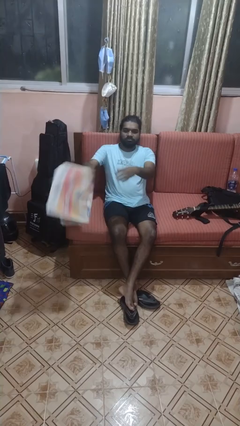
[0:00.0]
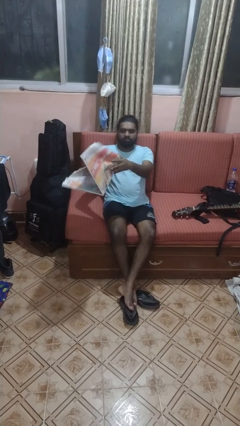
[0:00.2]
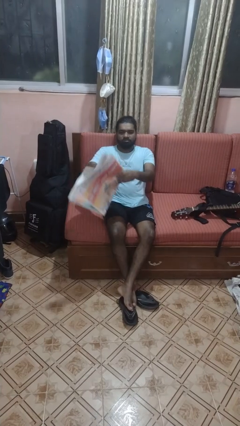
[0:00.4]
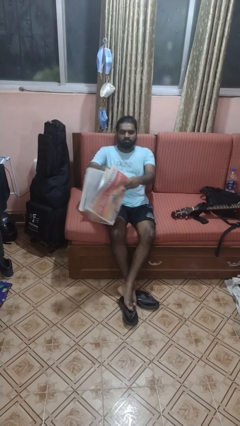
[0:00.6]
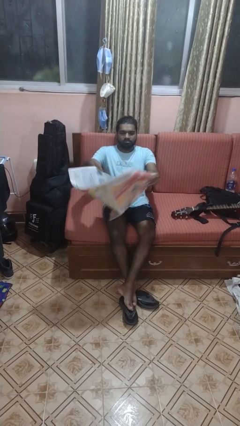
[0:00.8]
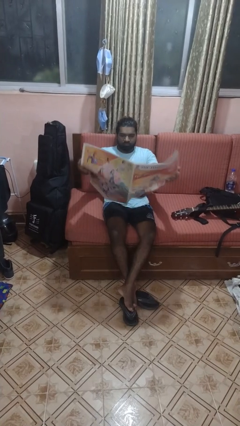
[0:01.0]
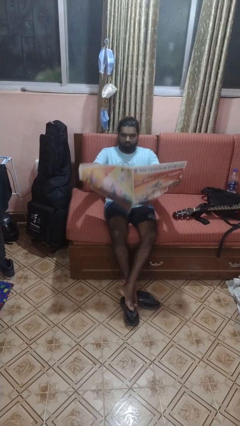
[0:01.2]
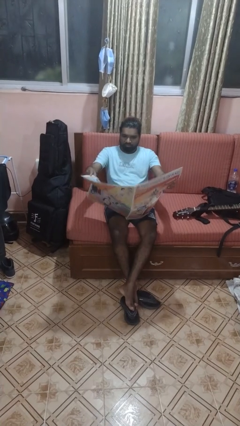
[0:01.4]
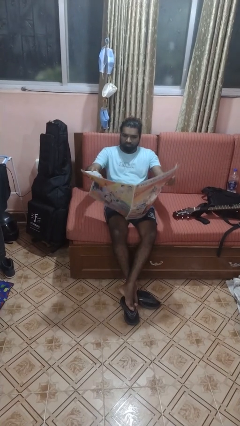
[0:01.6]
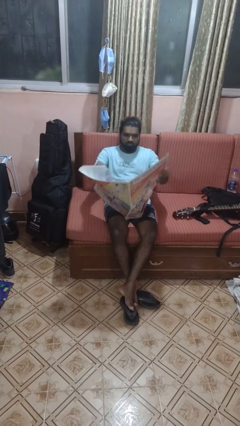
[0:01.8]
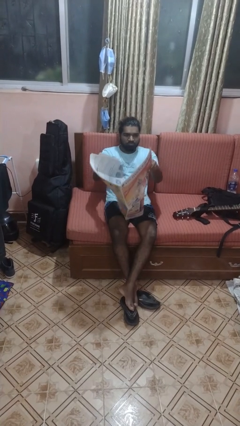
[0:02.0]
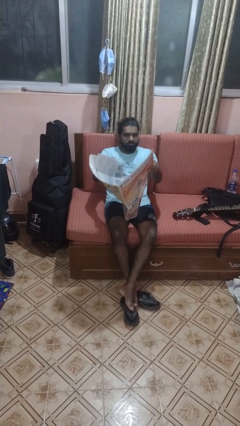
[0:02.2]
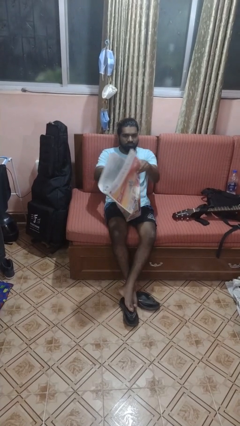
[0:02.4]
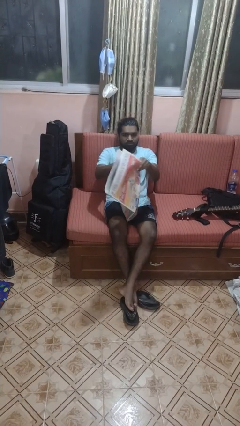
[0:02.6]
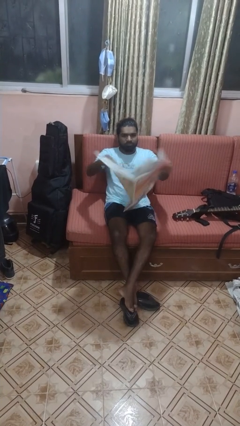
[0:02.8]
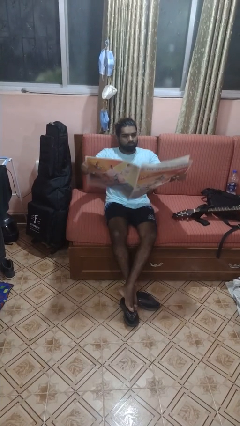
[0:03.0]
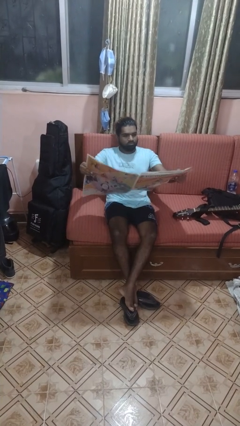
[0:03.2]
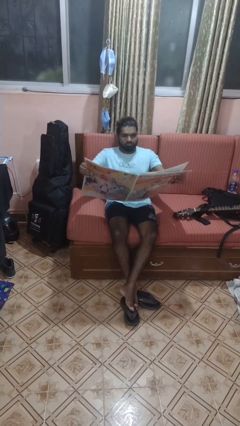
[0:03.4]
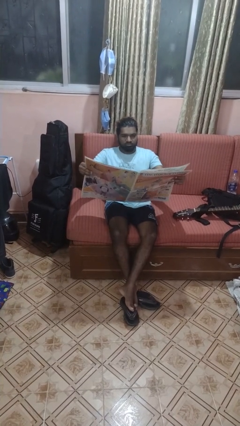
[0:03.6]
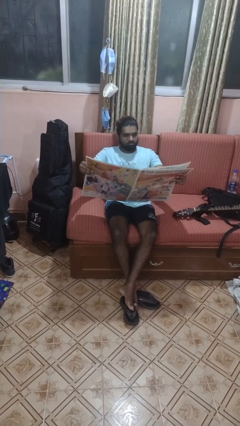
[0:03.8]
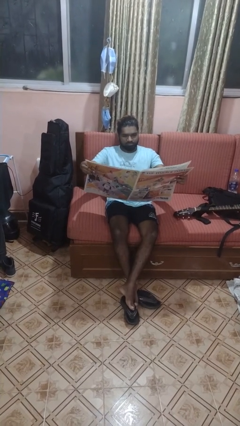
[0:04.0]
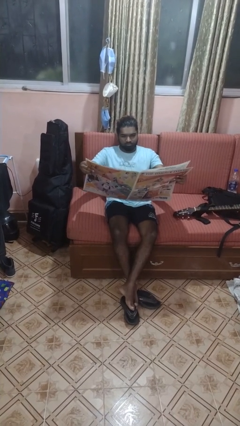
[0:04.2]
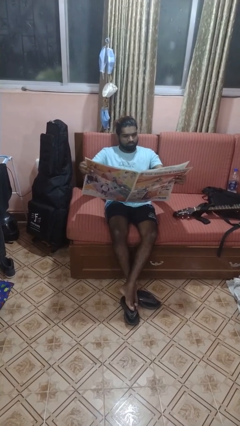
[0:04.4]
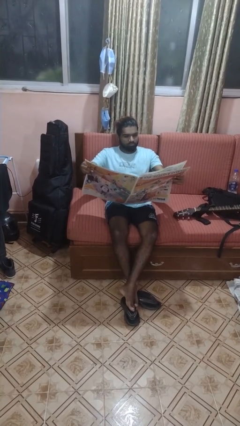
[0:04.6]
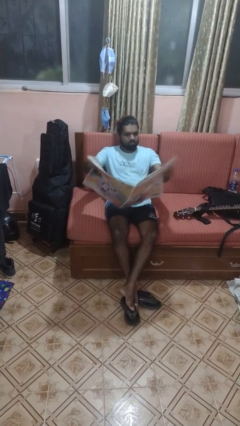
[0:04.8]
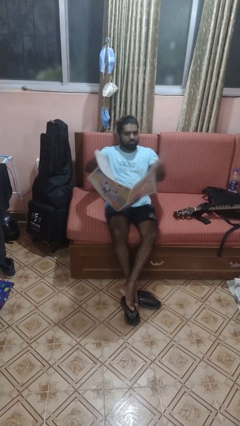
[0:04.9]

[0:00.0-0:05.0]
person reads newspaper

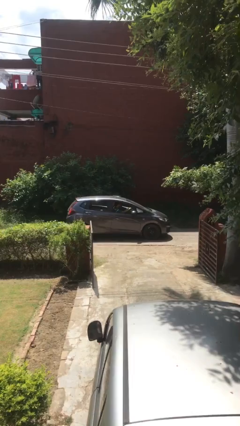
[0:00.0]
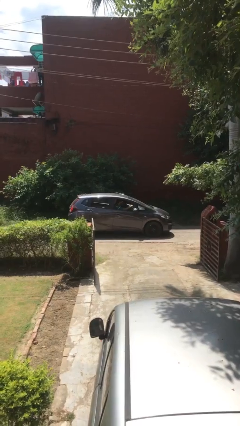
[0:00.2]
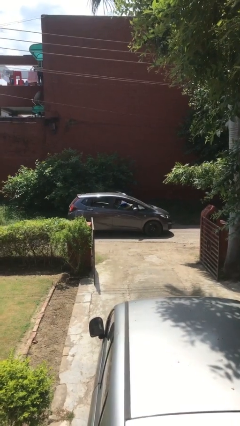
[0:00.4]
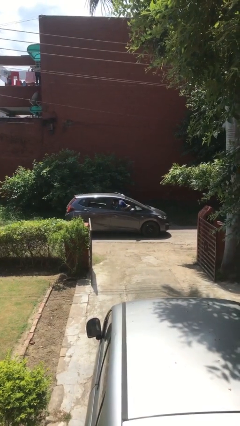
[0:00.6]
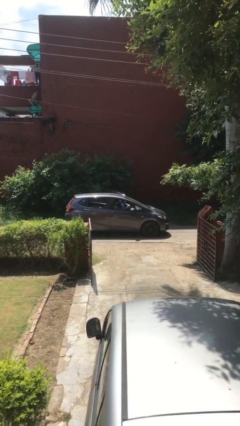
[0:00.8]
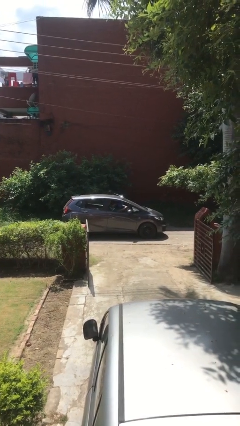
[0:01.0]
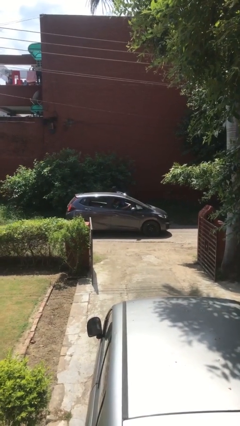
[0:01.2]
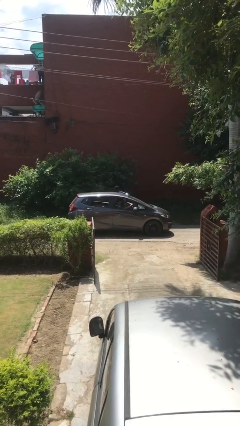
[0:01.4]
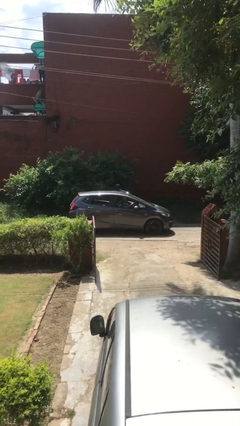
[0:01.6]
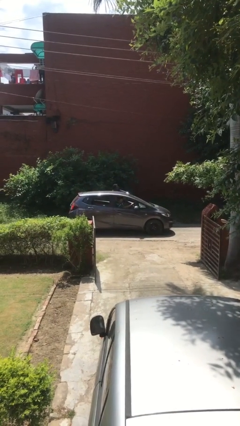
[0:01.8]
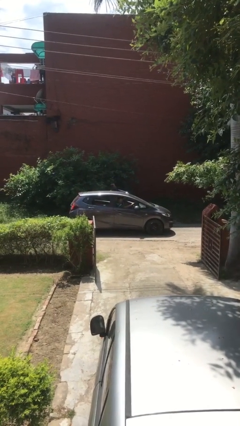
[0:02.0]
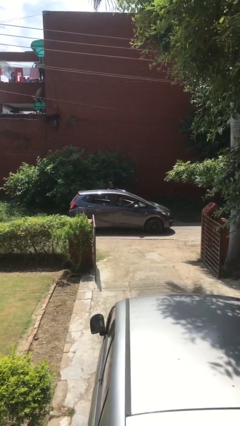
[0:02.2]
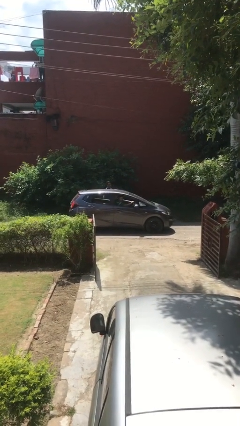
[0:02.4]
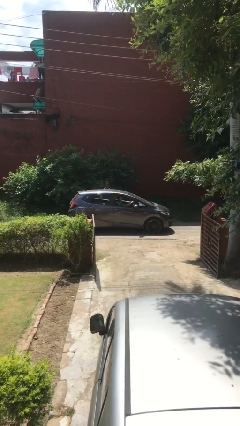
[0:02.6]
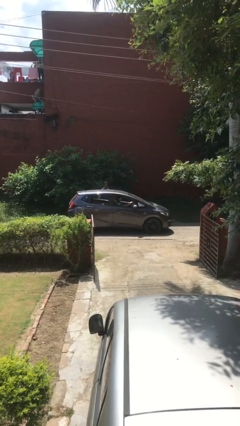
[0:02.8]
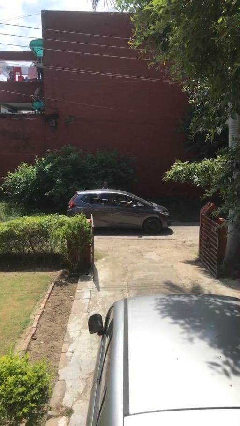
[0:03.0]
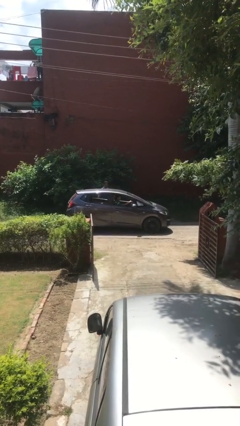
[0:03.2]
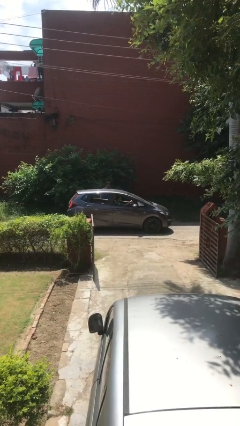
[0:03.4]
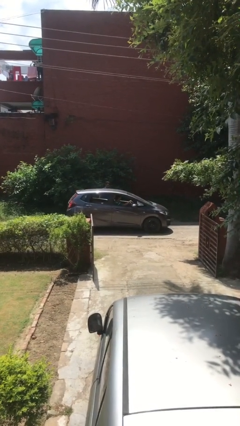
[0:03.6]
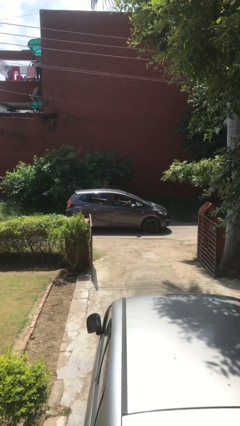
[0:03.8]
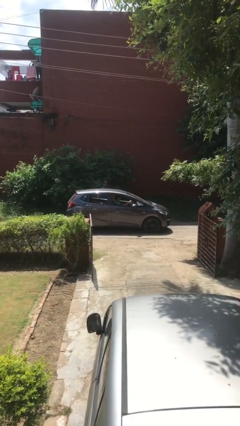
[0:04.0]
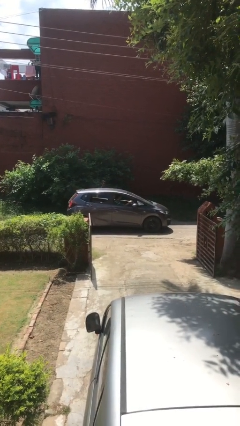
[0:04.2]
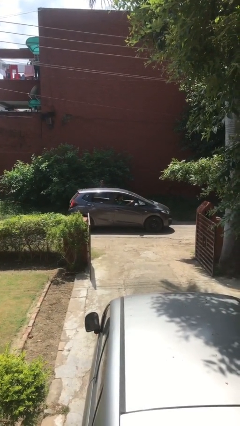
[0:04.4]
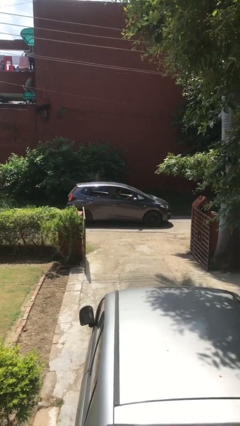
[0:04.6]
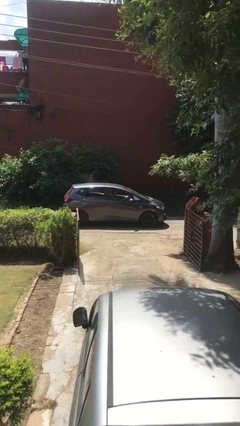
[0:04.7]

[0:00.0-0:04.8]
car drops off person

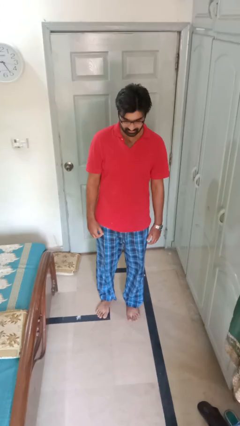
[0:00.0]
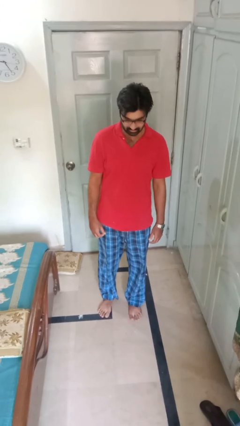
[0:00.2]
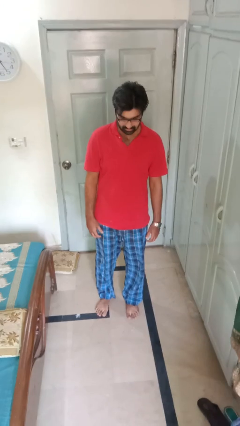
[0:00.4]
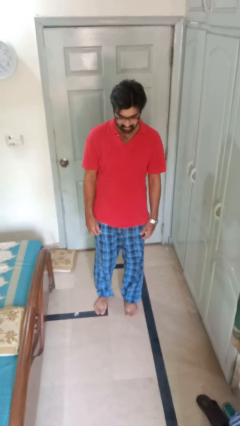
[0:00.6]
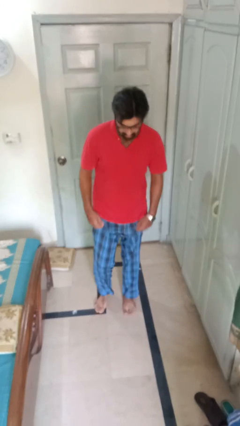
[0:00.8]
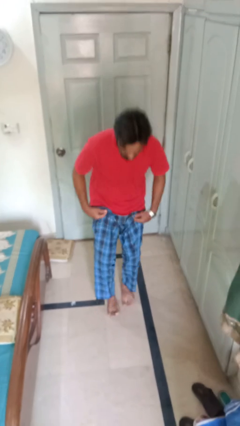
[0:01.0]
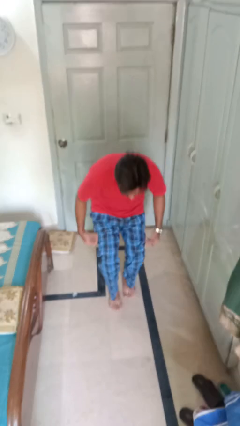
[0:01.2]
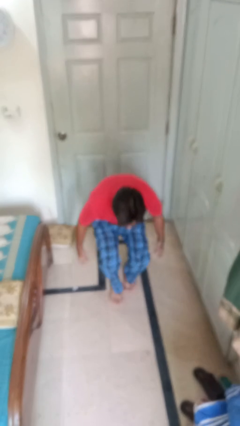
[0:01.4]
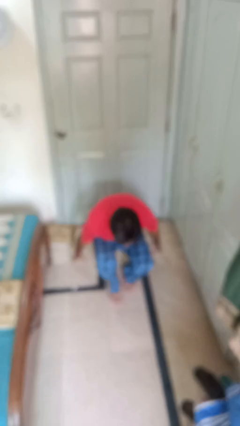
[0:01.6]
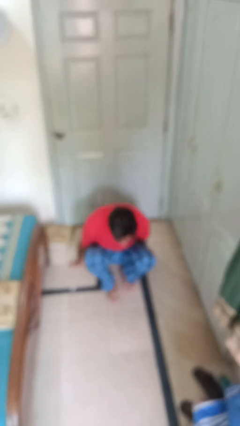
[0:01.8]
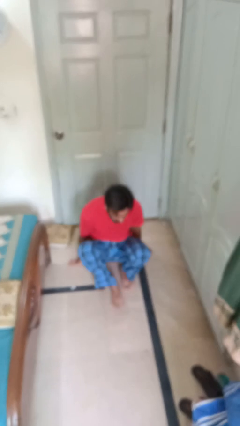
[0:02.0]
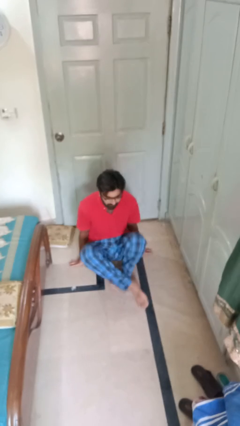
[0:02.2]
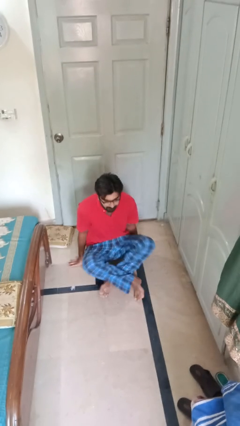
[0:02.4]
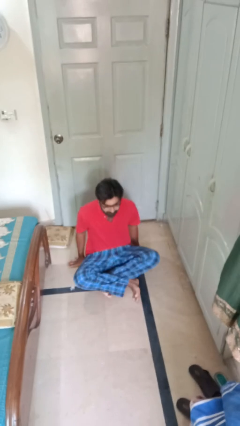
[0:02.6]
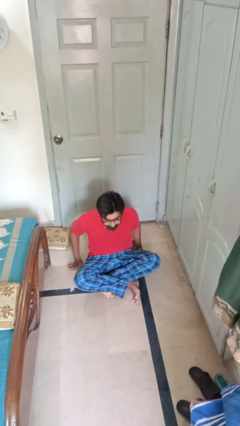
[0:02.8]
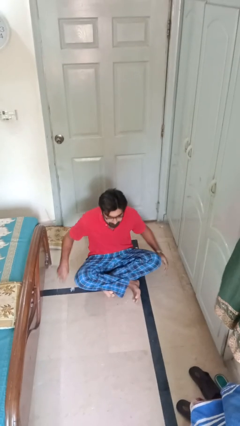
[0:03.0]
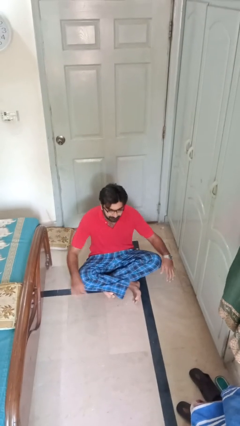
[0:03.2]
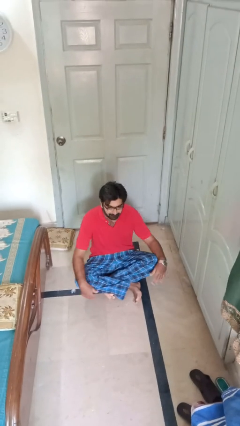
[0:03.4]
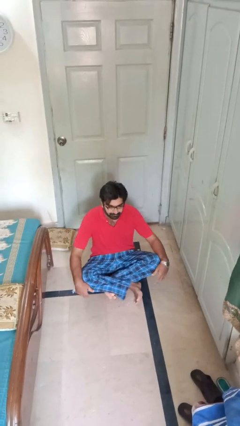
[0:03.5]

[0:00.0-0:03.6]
person sits crisscross

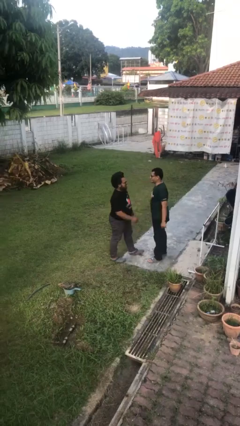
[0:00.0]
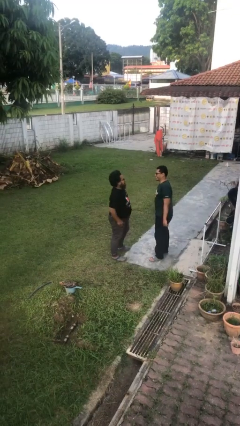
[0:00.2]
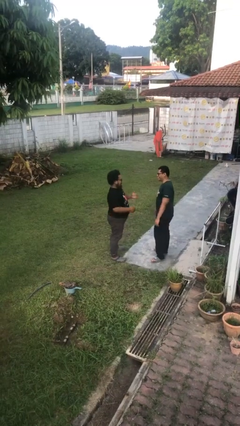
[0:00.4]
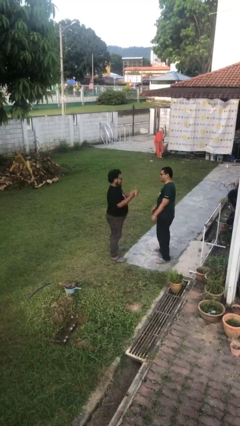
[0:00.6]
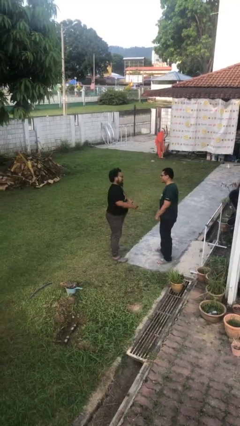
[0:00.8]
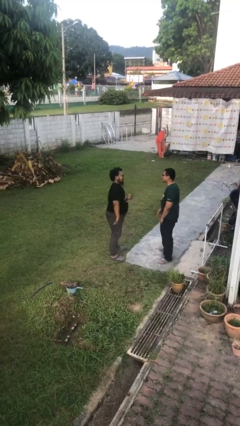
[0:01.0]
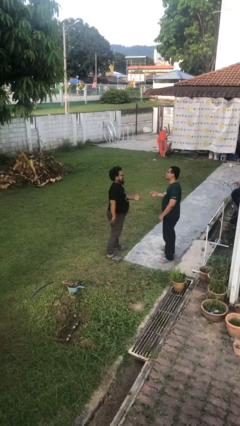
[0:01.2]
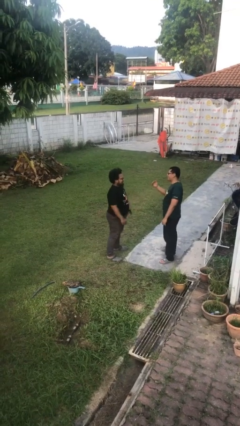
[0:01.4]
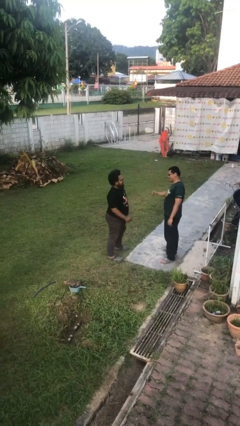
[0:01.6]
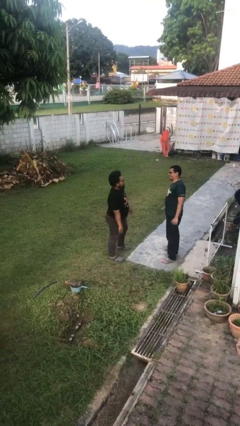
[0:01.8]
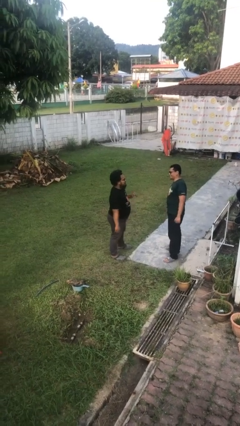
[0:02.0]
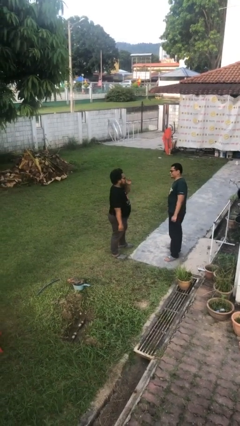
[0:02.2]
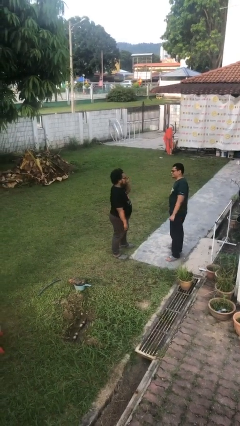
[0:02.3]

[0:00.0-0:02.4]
person talks to person

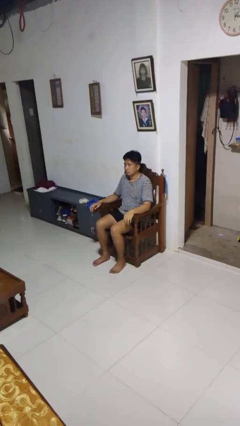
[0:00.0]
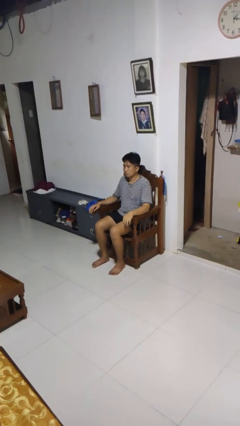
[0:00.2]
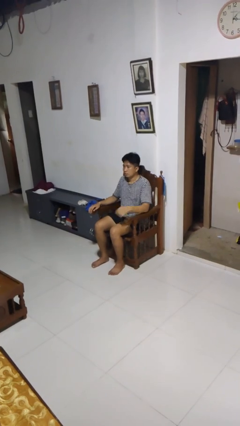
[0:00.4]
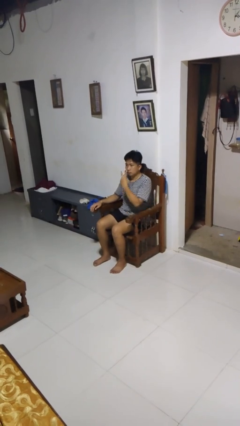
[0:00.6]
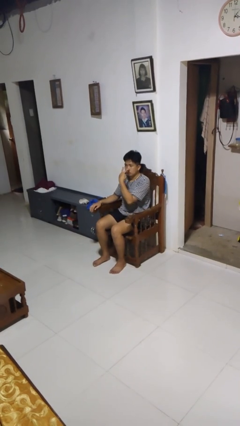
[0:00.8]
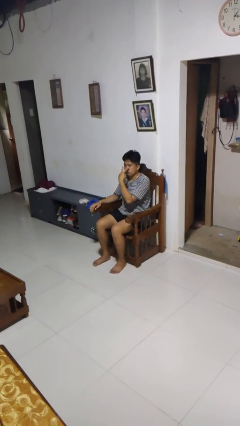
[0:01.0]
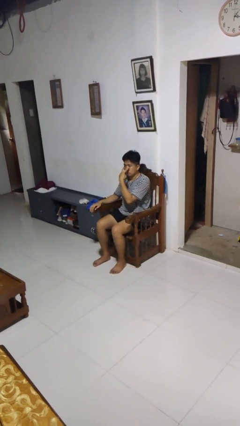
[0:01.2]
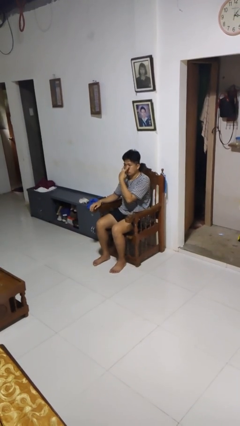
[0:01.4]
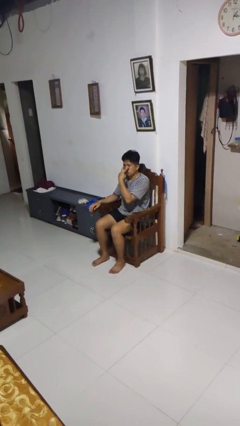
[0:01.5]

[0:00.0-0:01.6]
person gestures watch closely
